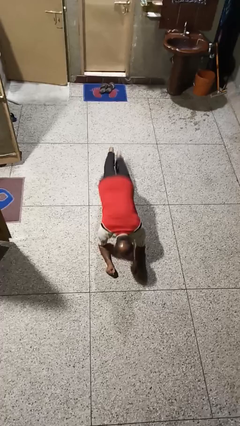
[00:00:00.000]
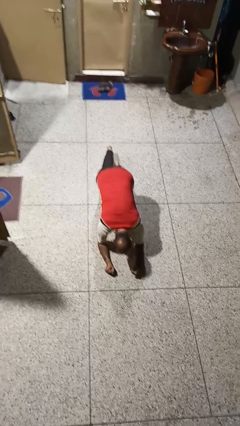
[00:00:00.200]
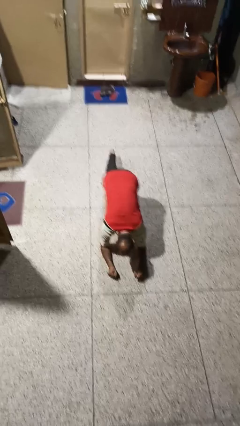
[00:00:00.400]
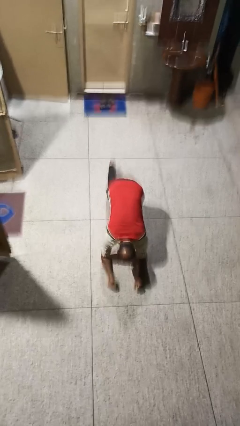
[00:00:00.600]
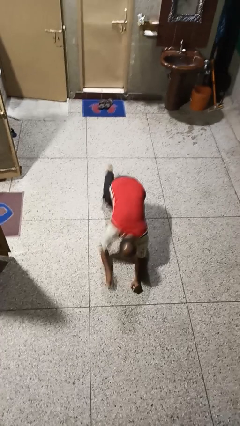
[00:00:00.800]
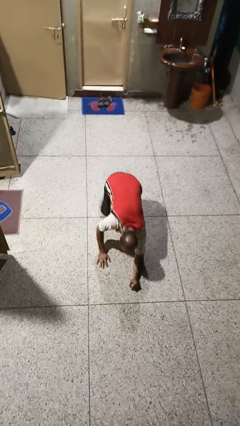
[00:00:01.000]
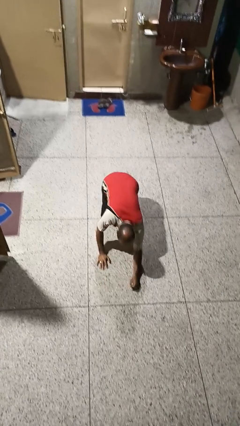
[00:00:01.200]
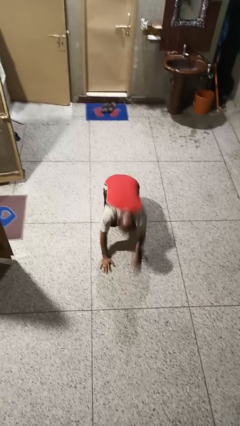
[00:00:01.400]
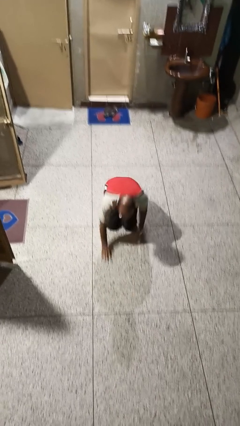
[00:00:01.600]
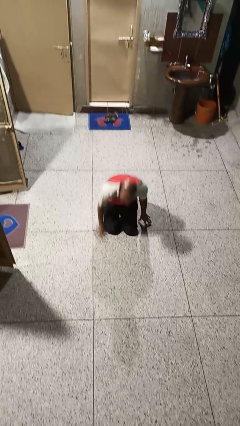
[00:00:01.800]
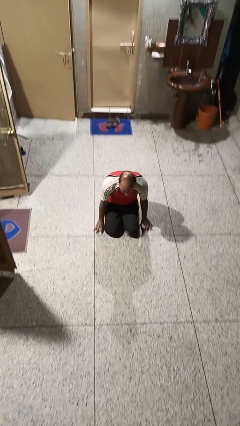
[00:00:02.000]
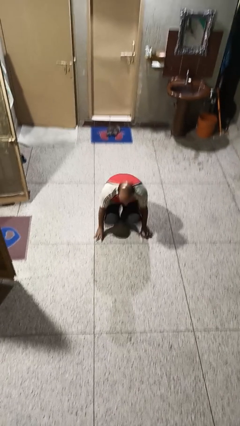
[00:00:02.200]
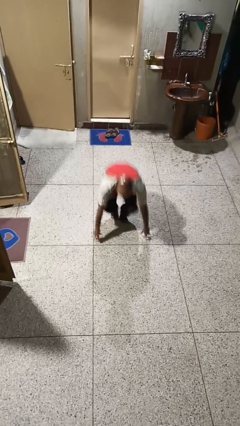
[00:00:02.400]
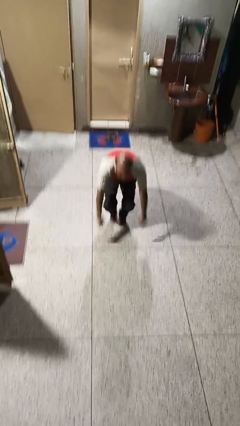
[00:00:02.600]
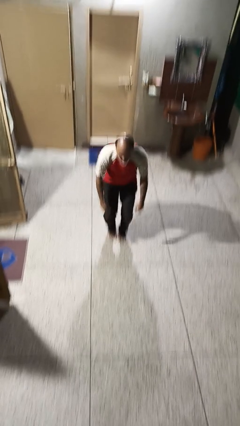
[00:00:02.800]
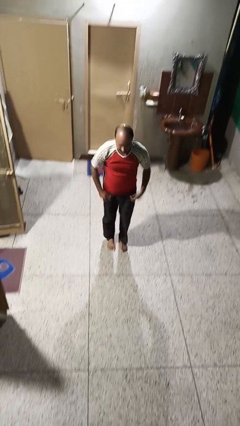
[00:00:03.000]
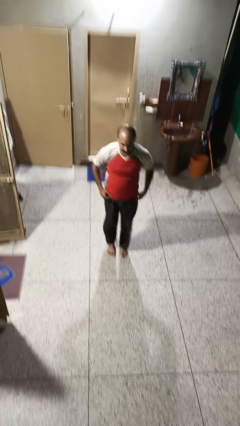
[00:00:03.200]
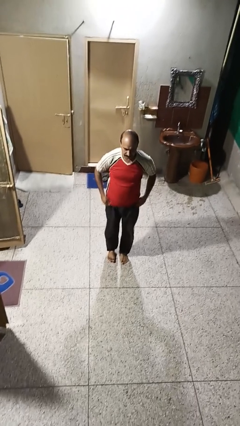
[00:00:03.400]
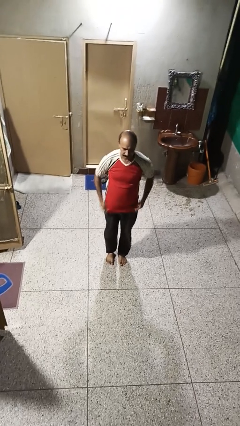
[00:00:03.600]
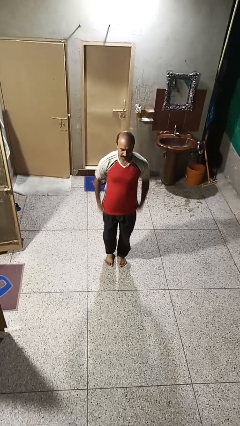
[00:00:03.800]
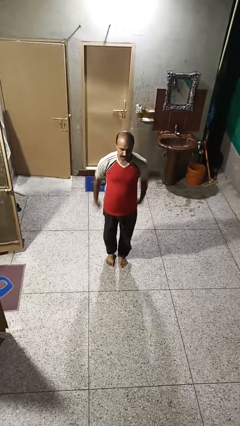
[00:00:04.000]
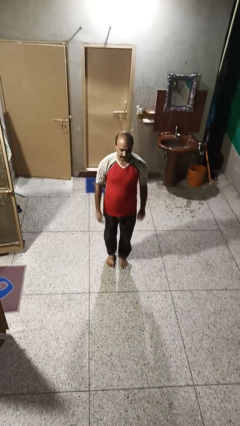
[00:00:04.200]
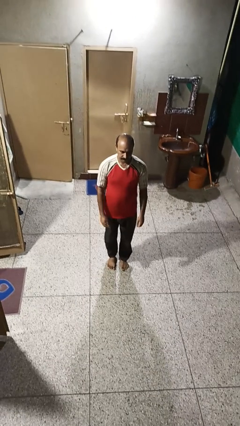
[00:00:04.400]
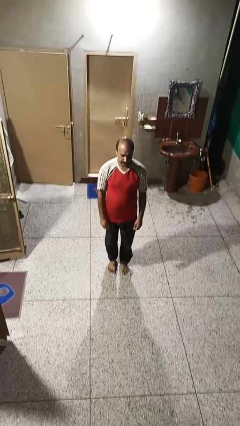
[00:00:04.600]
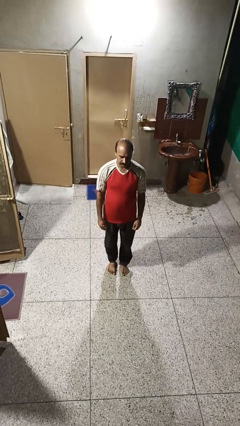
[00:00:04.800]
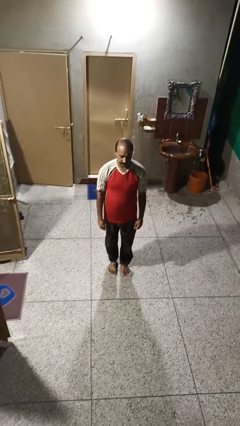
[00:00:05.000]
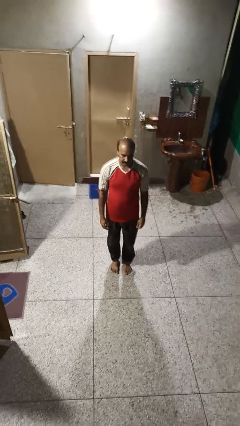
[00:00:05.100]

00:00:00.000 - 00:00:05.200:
person stands up from floor

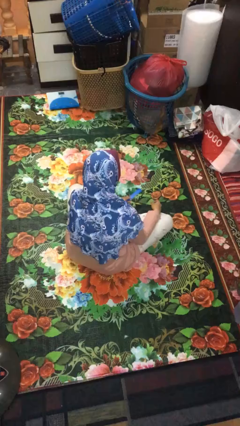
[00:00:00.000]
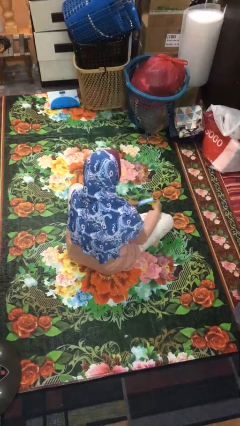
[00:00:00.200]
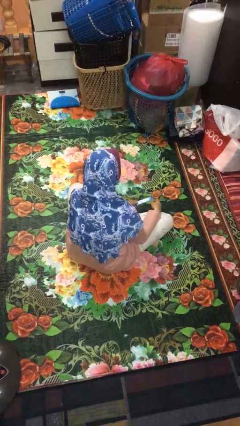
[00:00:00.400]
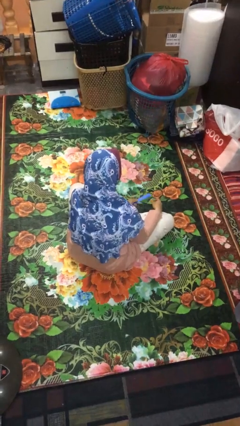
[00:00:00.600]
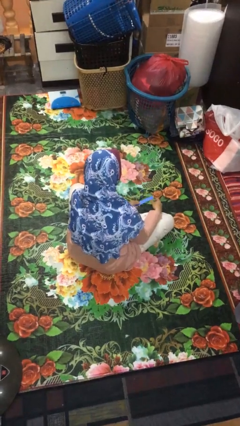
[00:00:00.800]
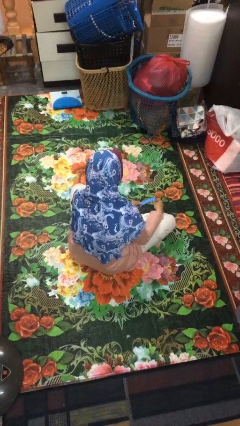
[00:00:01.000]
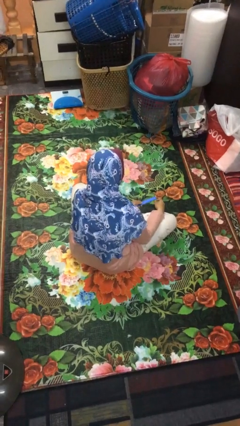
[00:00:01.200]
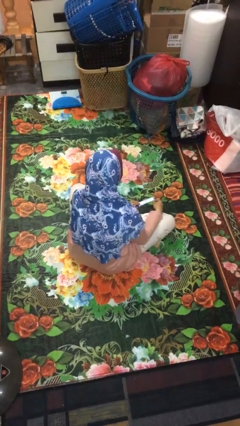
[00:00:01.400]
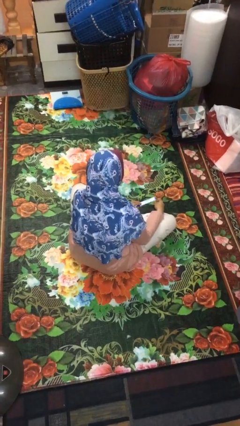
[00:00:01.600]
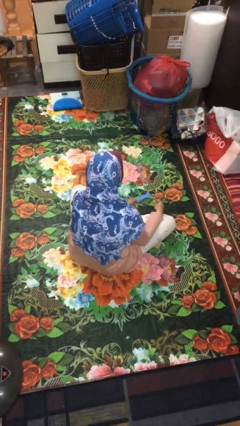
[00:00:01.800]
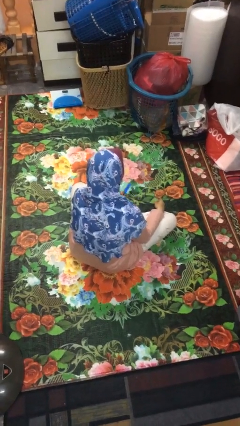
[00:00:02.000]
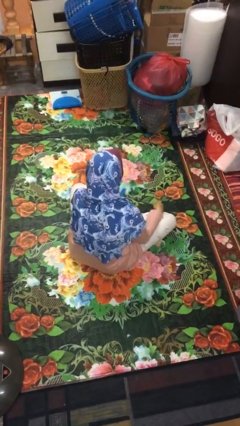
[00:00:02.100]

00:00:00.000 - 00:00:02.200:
person files fingernails

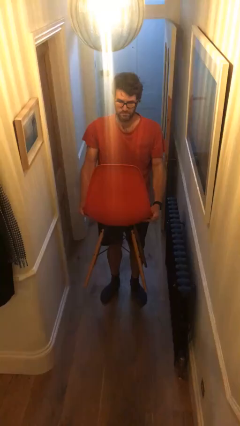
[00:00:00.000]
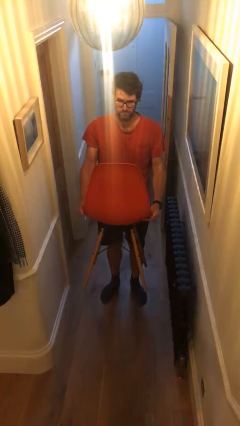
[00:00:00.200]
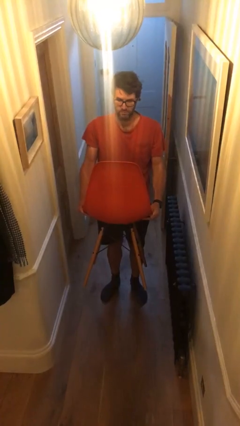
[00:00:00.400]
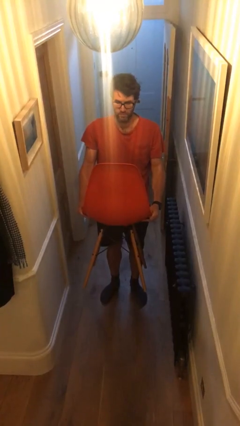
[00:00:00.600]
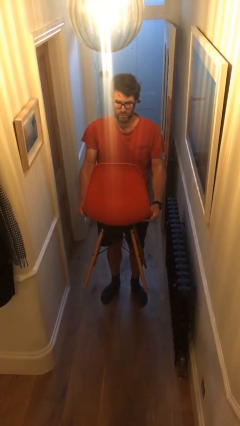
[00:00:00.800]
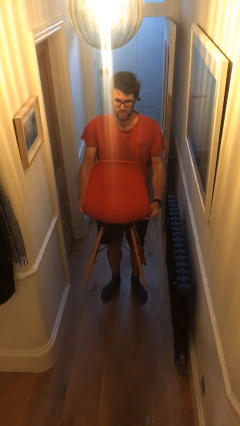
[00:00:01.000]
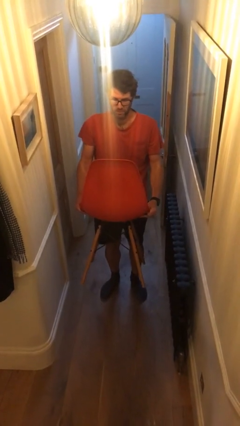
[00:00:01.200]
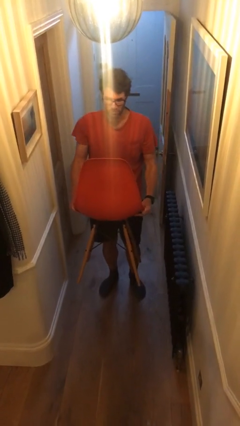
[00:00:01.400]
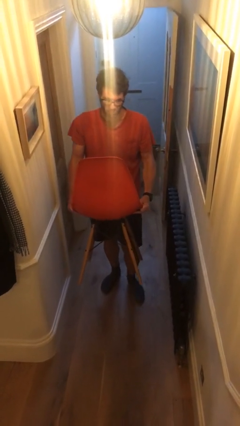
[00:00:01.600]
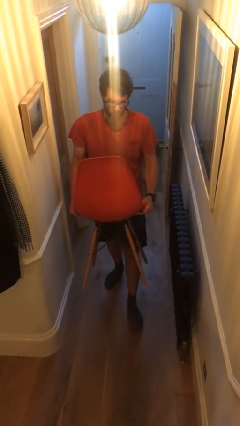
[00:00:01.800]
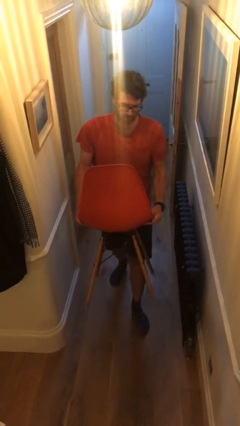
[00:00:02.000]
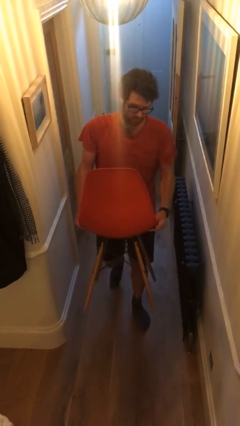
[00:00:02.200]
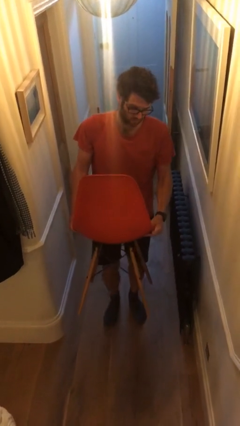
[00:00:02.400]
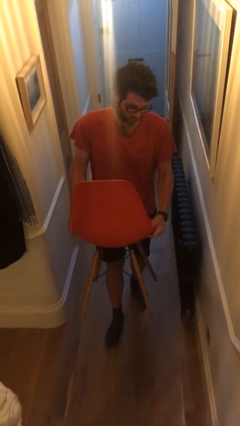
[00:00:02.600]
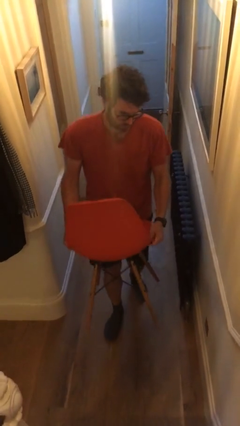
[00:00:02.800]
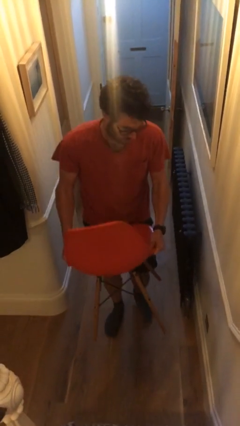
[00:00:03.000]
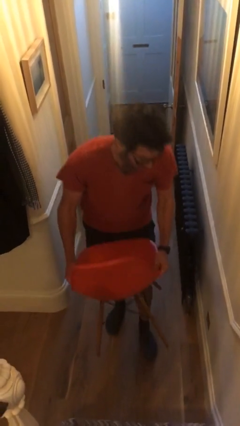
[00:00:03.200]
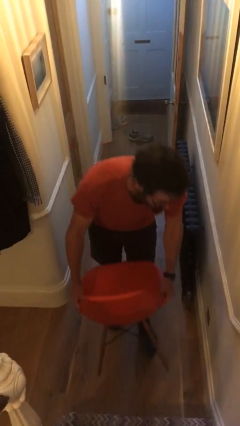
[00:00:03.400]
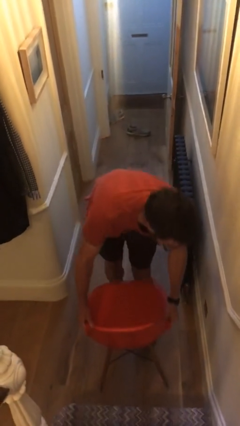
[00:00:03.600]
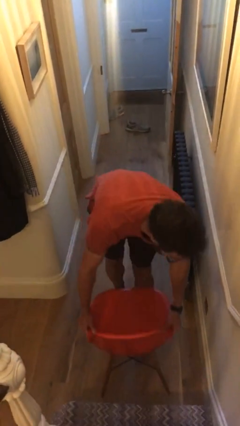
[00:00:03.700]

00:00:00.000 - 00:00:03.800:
person carries heavy object

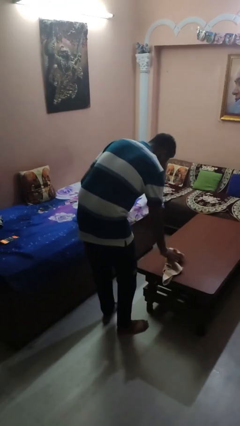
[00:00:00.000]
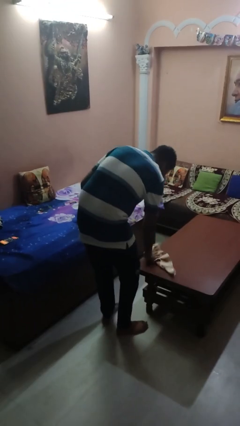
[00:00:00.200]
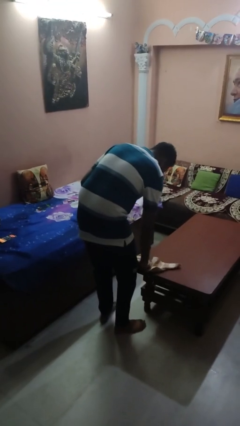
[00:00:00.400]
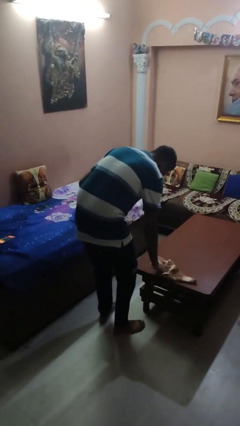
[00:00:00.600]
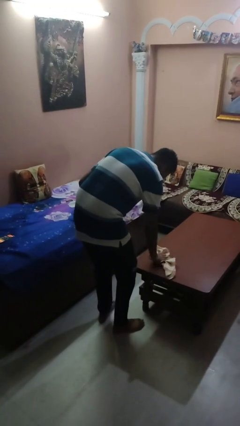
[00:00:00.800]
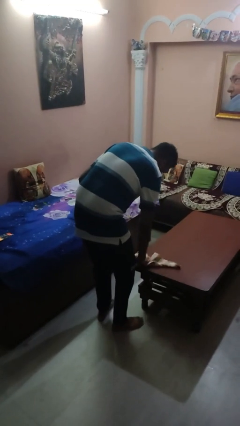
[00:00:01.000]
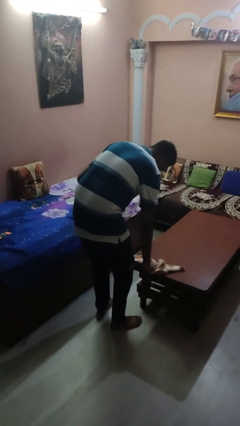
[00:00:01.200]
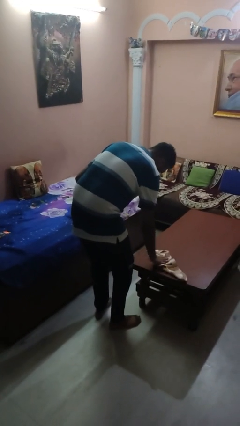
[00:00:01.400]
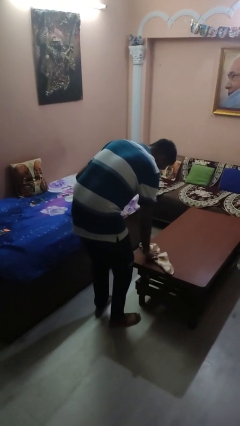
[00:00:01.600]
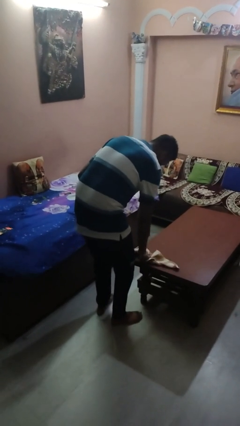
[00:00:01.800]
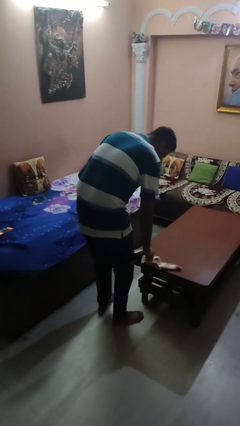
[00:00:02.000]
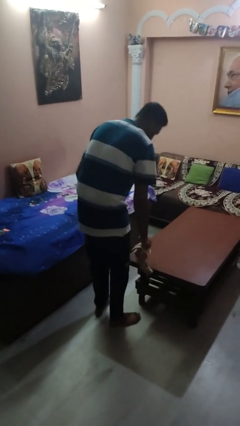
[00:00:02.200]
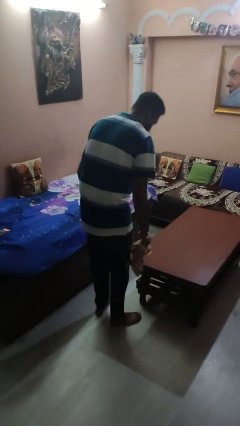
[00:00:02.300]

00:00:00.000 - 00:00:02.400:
person cleans table with rag

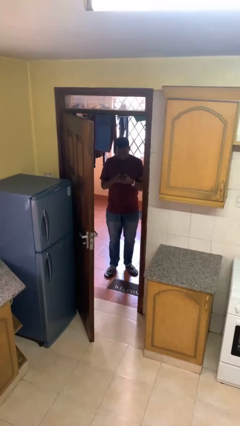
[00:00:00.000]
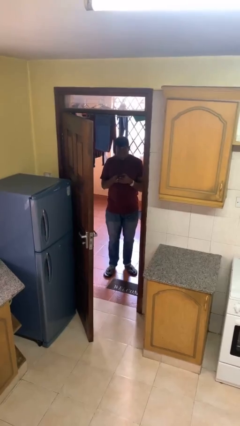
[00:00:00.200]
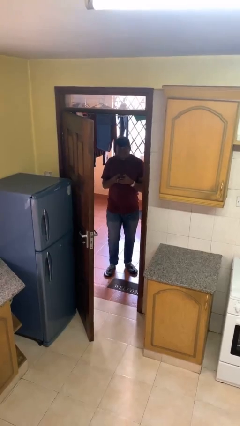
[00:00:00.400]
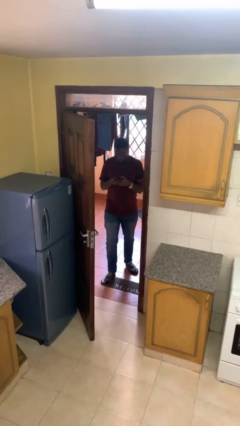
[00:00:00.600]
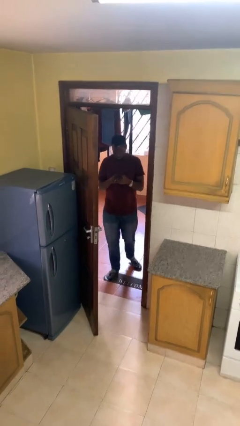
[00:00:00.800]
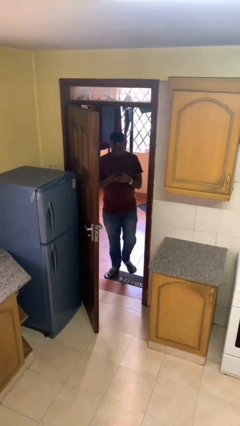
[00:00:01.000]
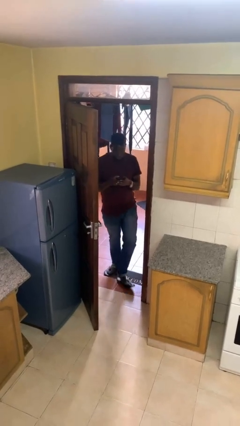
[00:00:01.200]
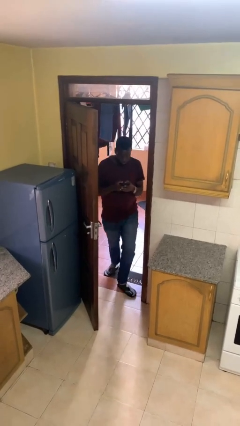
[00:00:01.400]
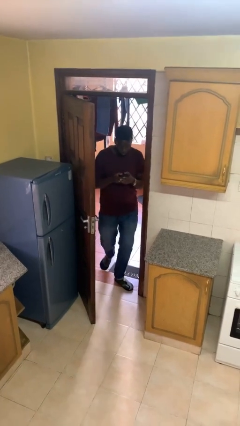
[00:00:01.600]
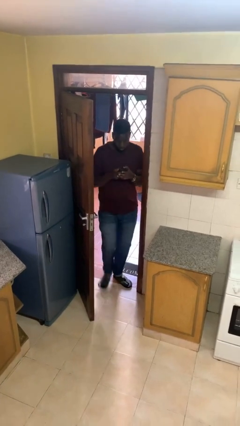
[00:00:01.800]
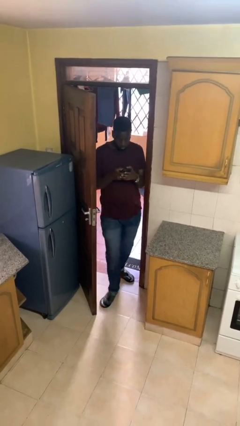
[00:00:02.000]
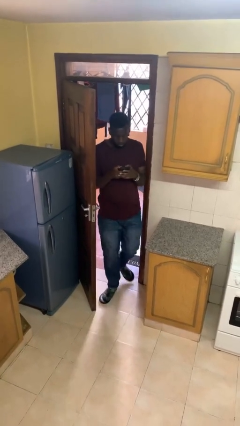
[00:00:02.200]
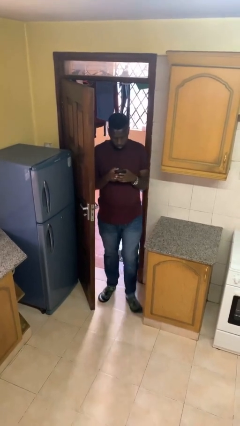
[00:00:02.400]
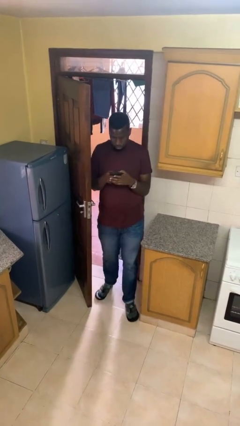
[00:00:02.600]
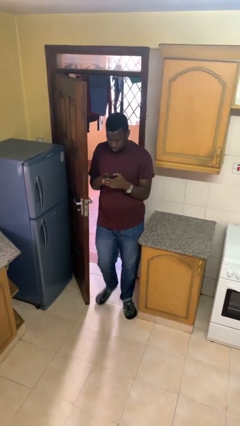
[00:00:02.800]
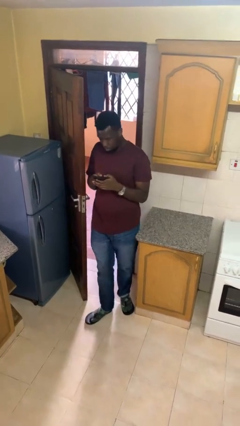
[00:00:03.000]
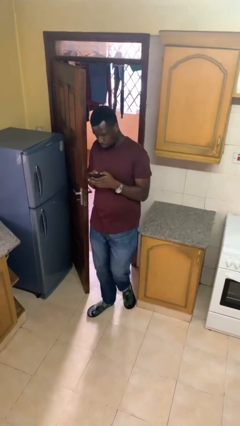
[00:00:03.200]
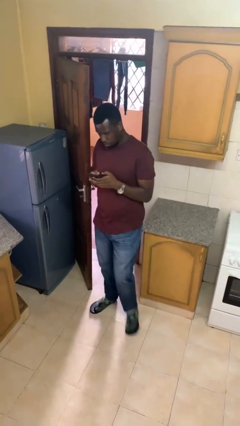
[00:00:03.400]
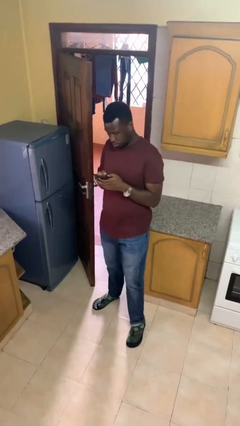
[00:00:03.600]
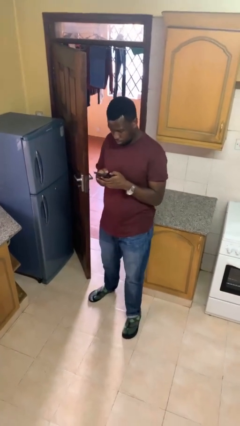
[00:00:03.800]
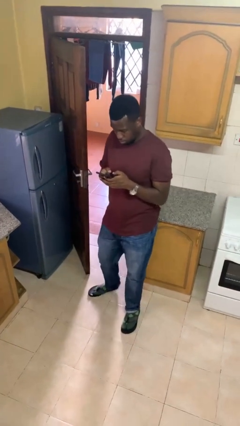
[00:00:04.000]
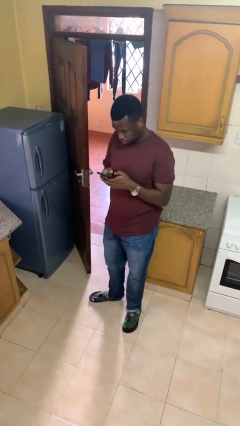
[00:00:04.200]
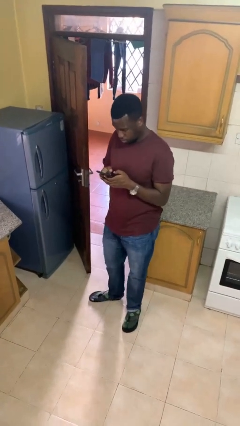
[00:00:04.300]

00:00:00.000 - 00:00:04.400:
person enters scene through structure
